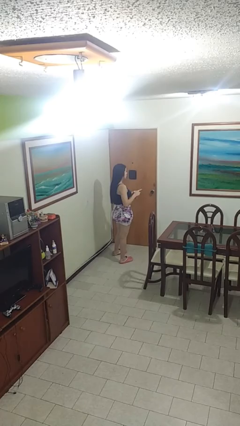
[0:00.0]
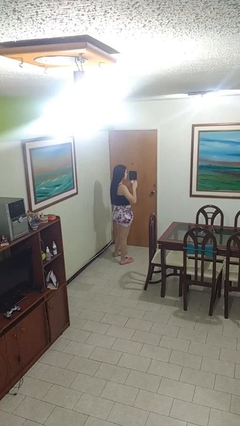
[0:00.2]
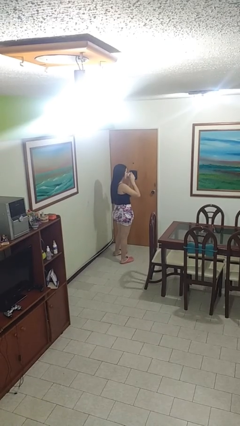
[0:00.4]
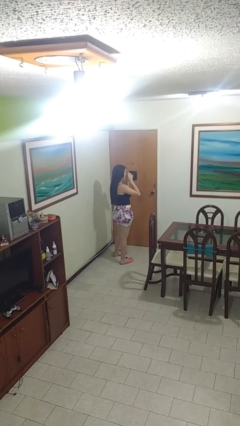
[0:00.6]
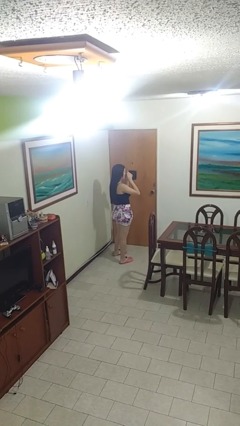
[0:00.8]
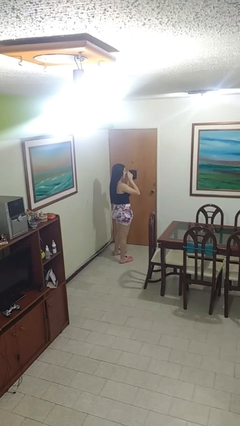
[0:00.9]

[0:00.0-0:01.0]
person drinks from mug

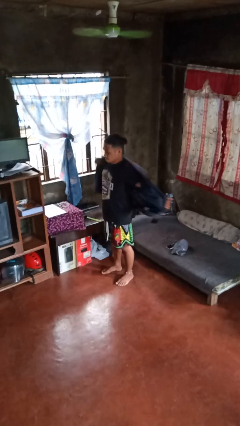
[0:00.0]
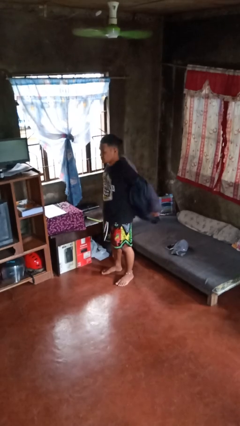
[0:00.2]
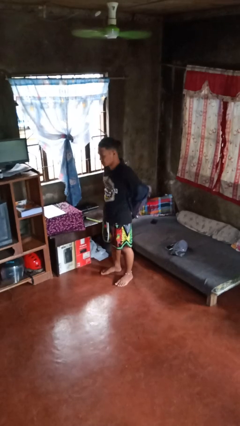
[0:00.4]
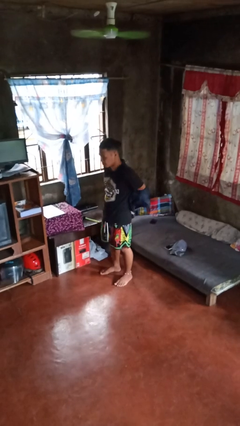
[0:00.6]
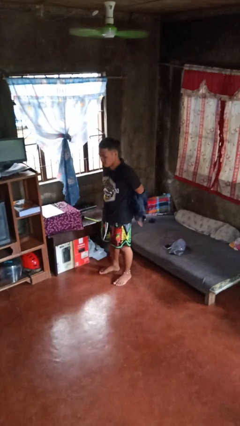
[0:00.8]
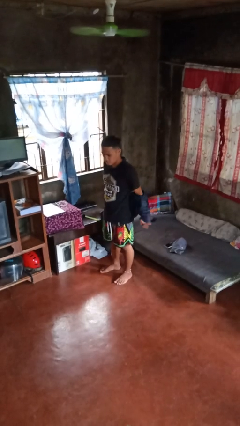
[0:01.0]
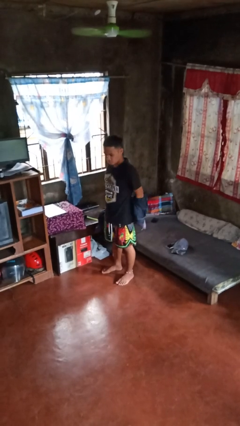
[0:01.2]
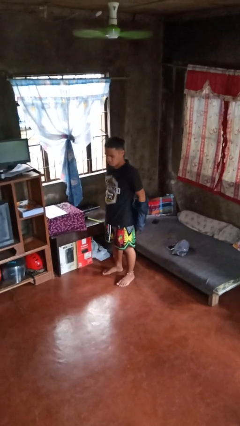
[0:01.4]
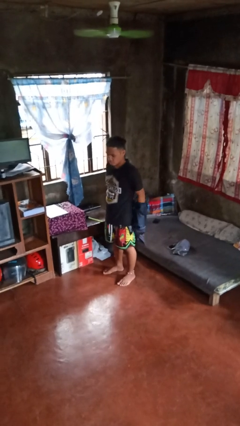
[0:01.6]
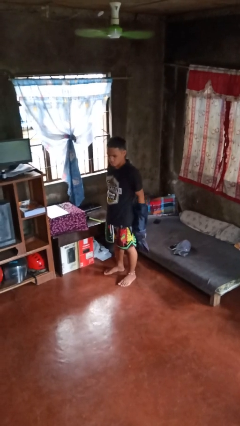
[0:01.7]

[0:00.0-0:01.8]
person takes off jacket

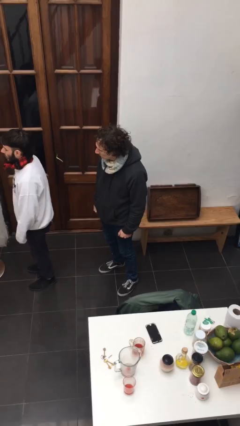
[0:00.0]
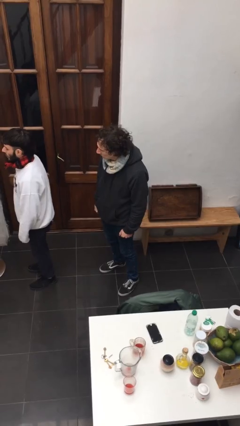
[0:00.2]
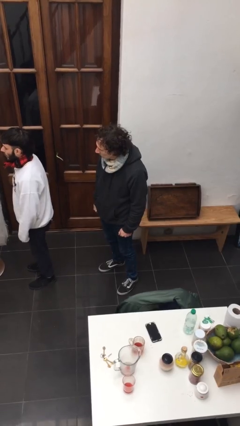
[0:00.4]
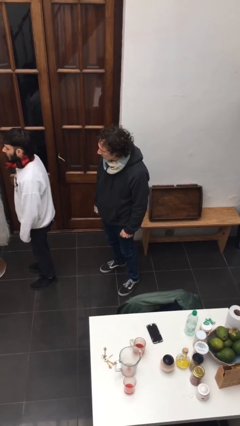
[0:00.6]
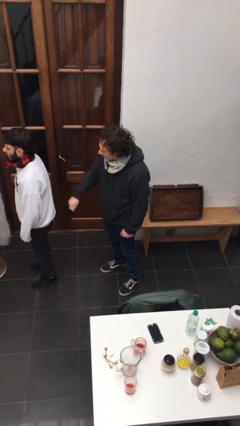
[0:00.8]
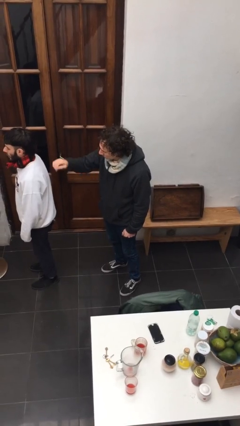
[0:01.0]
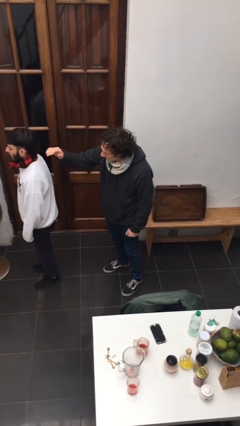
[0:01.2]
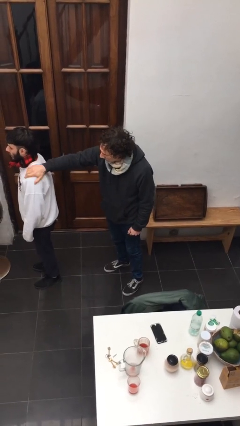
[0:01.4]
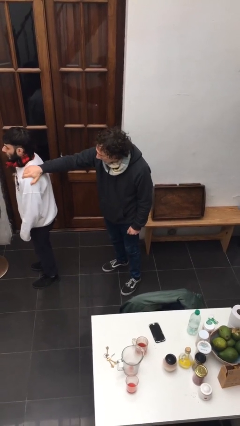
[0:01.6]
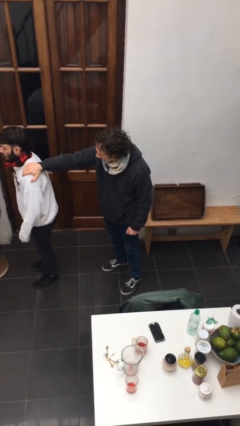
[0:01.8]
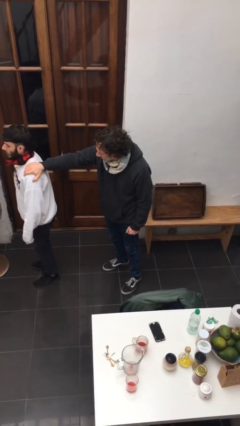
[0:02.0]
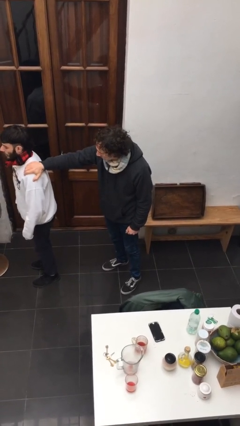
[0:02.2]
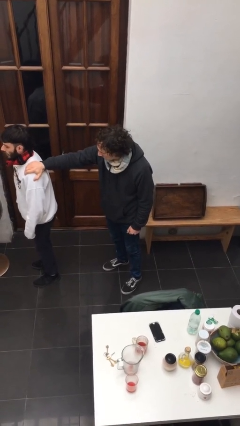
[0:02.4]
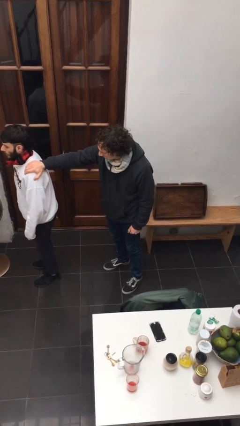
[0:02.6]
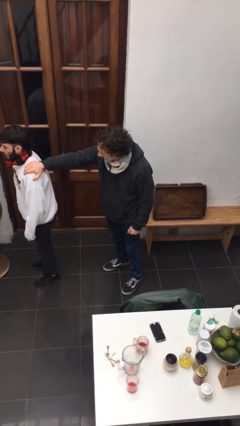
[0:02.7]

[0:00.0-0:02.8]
person grabs person by shoulder

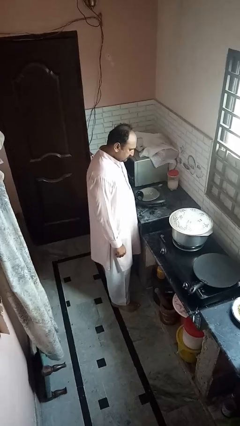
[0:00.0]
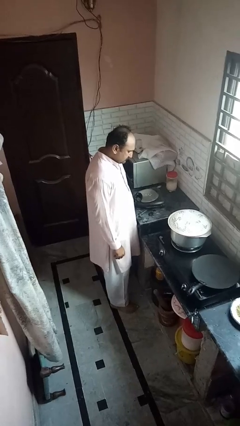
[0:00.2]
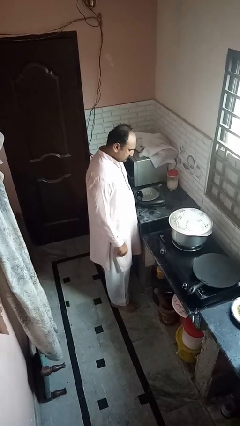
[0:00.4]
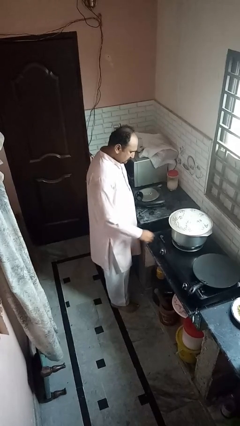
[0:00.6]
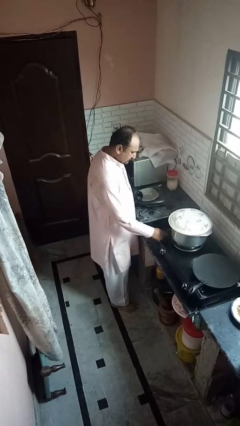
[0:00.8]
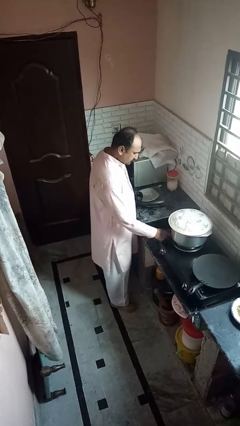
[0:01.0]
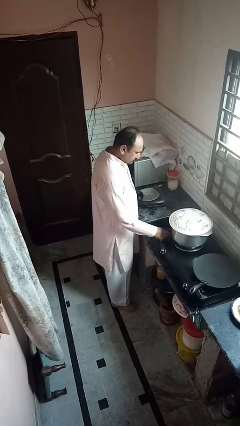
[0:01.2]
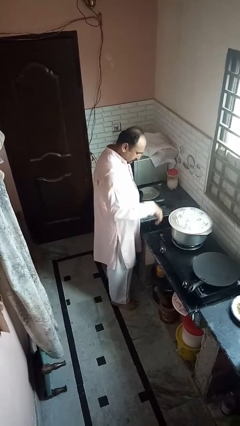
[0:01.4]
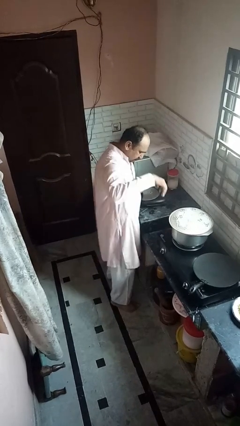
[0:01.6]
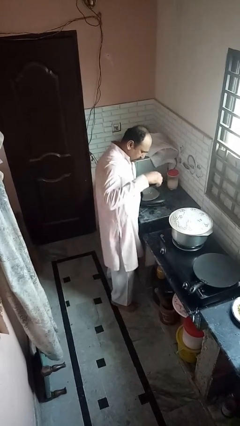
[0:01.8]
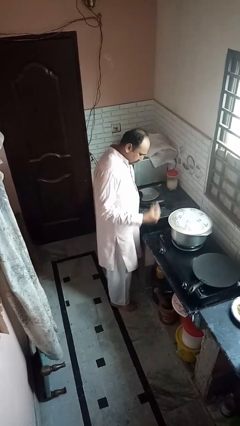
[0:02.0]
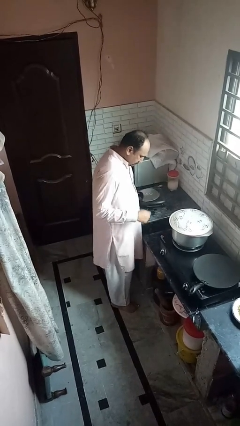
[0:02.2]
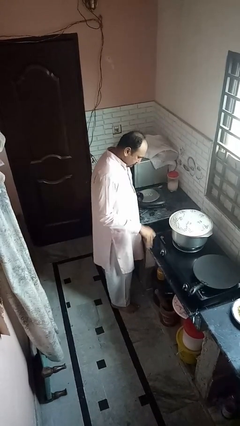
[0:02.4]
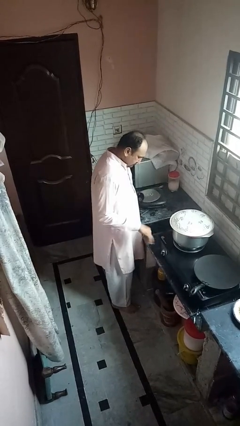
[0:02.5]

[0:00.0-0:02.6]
person burns hand

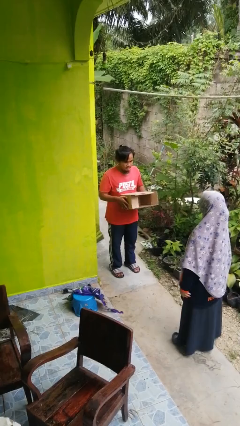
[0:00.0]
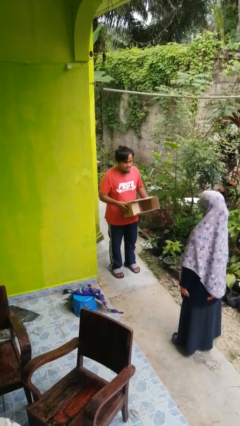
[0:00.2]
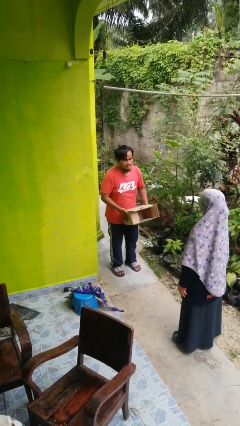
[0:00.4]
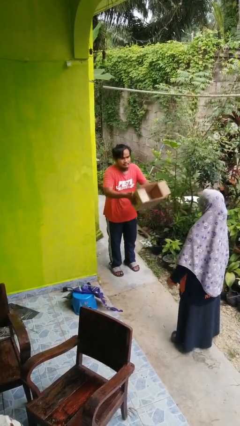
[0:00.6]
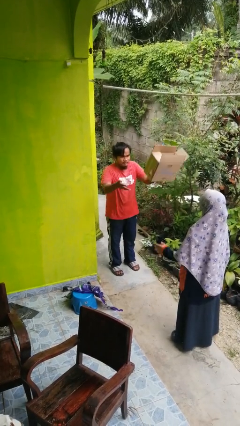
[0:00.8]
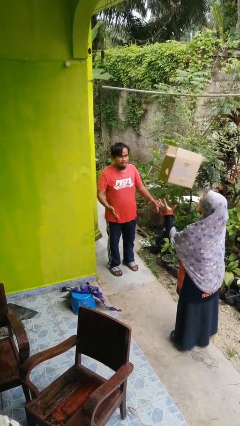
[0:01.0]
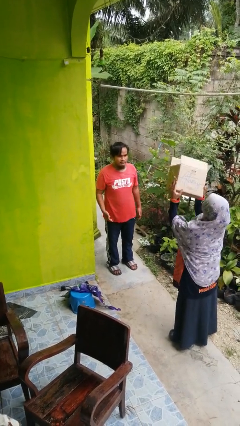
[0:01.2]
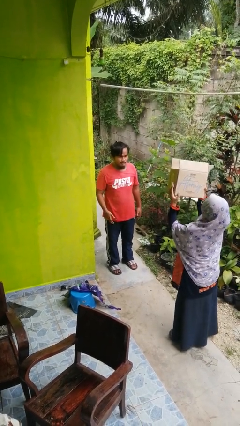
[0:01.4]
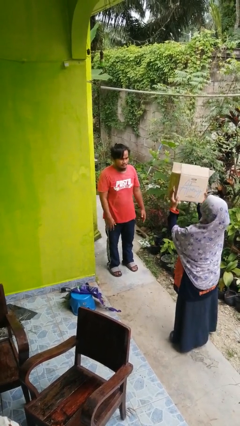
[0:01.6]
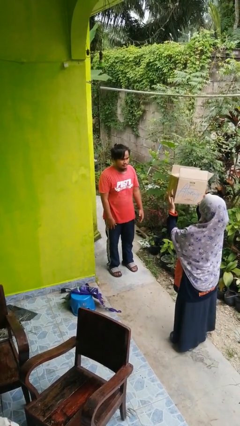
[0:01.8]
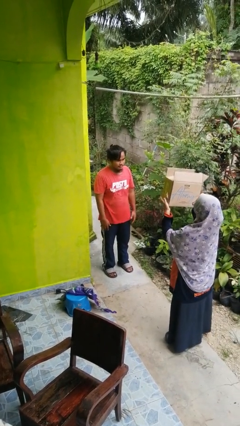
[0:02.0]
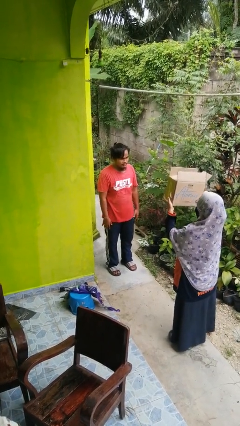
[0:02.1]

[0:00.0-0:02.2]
person throws object to person

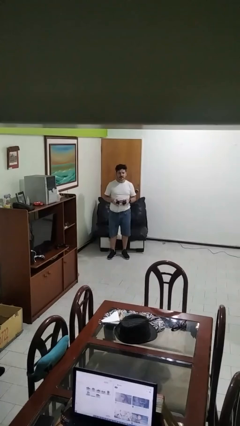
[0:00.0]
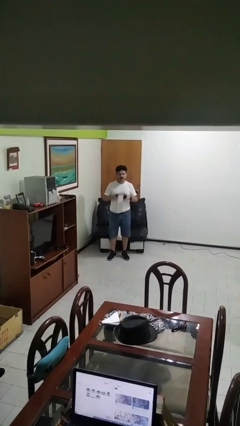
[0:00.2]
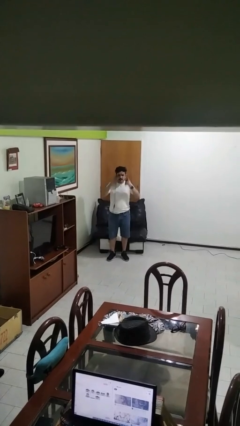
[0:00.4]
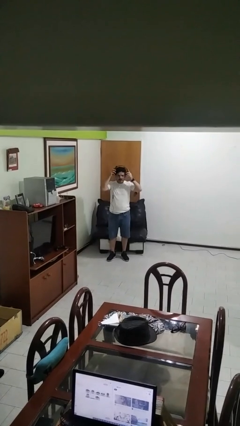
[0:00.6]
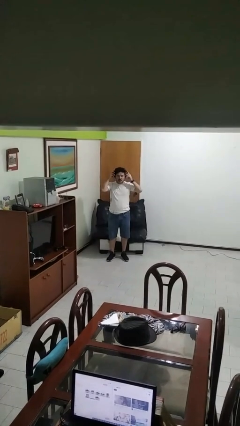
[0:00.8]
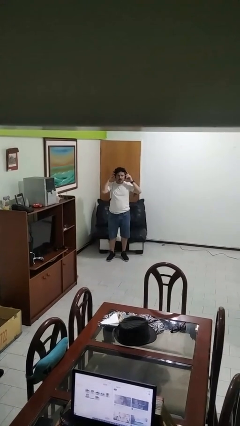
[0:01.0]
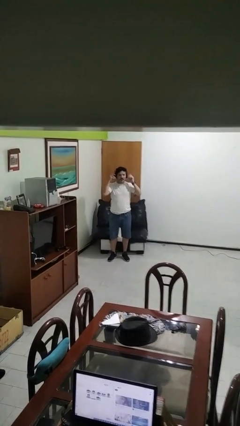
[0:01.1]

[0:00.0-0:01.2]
person puts on headphones

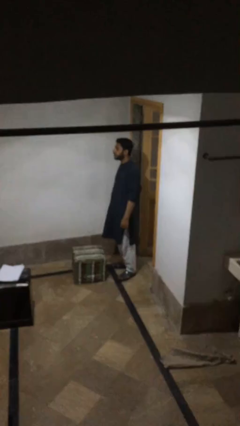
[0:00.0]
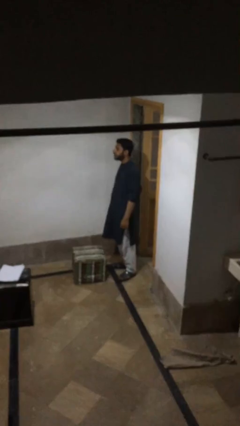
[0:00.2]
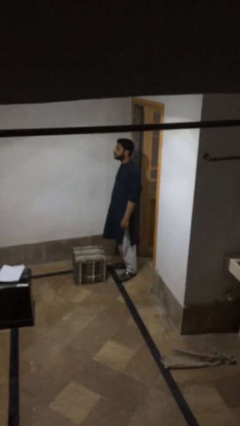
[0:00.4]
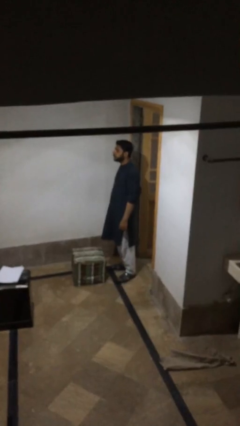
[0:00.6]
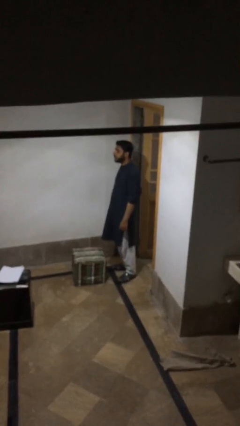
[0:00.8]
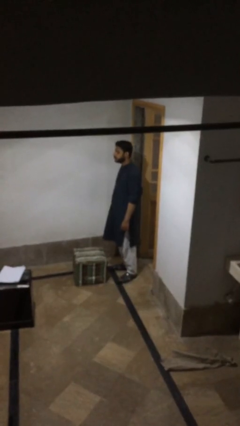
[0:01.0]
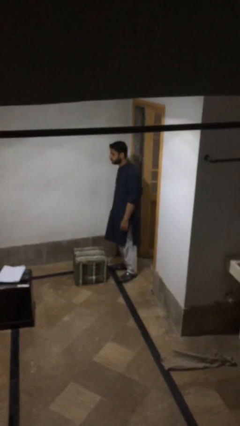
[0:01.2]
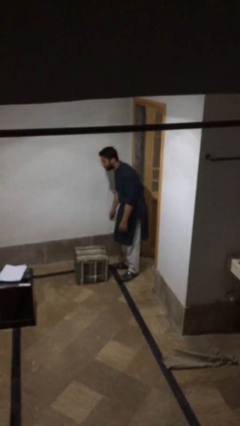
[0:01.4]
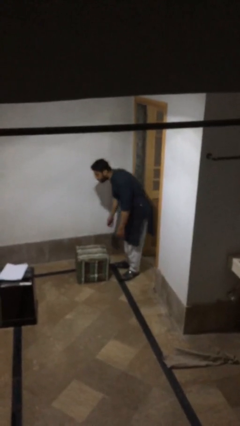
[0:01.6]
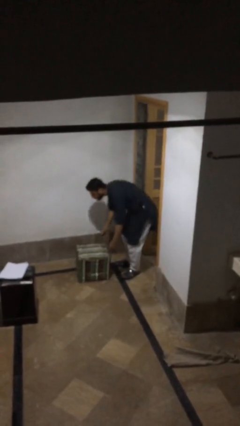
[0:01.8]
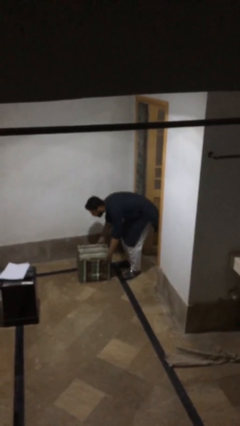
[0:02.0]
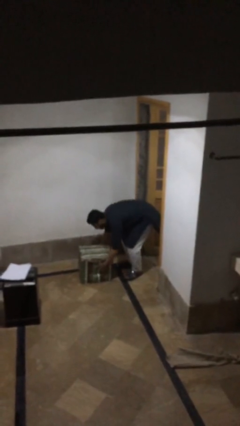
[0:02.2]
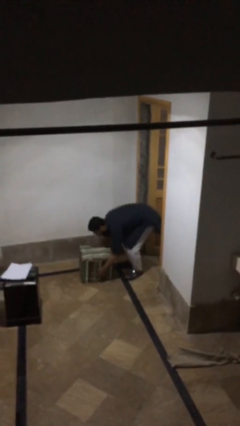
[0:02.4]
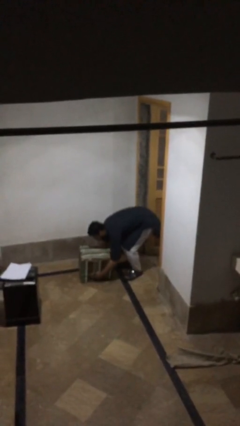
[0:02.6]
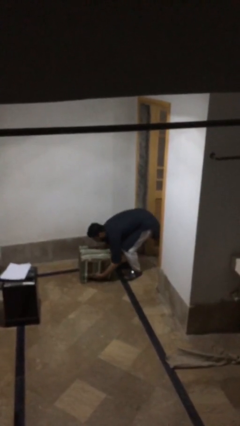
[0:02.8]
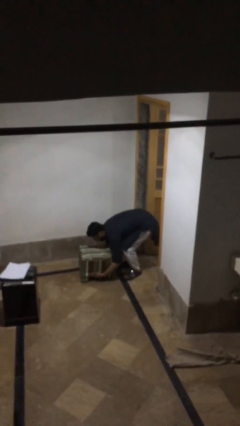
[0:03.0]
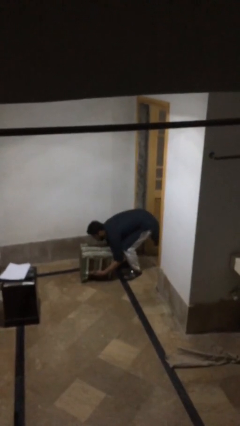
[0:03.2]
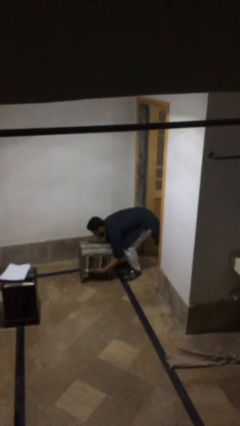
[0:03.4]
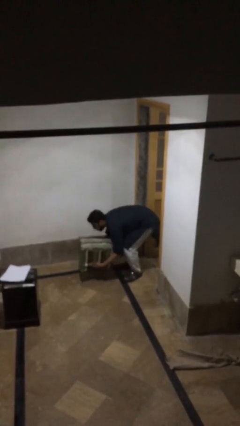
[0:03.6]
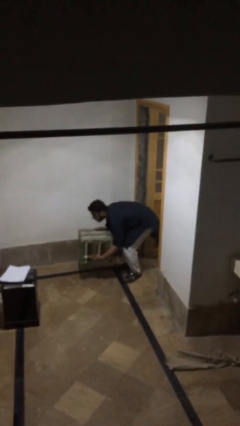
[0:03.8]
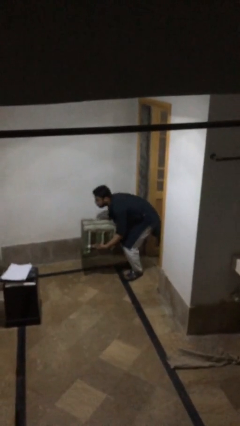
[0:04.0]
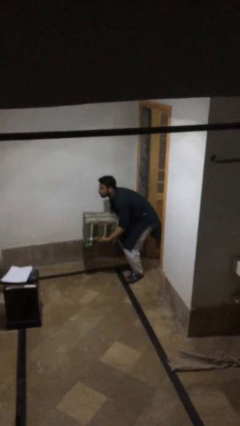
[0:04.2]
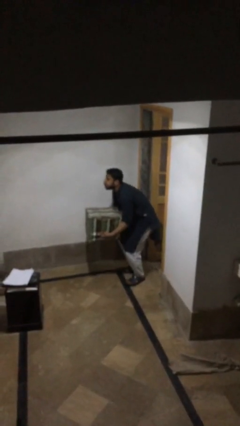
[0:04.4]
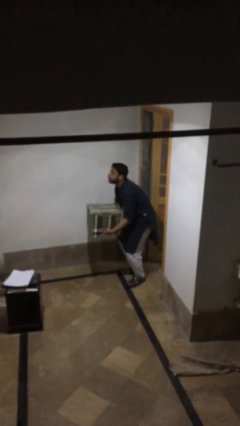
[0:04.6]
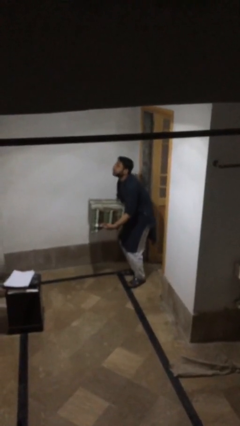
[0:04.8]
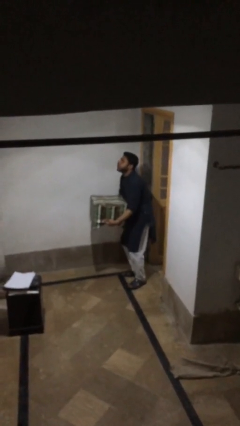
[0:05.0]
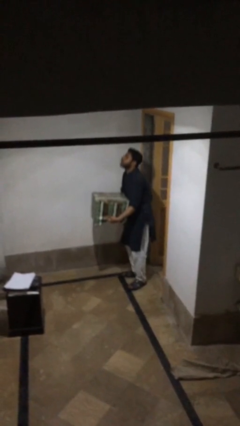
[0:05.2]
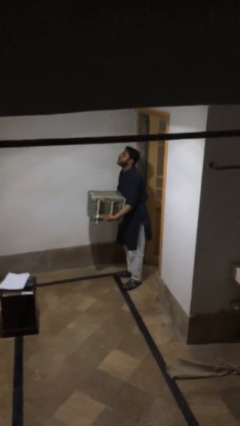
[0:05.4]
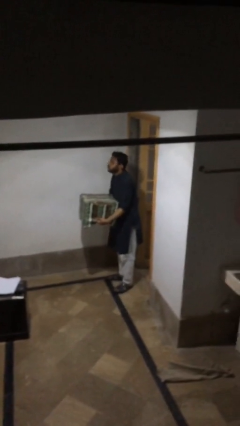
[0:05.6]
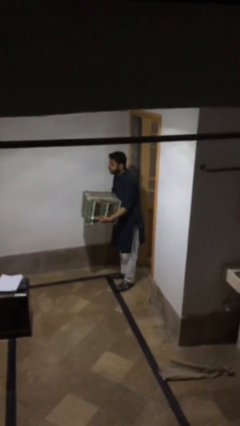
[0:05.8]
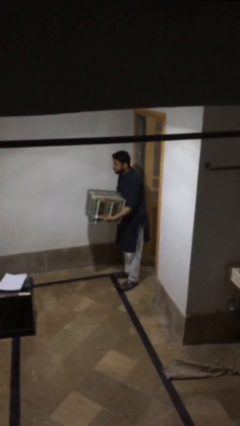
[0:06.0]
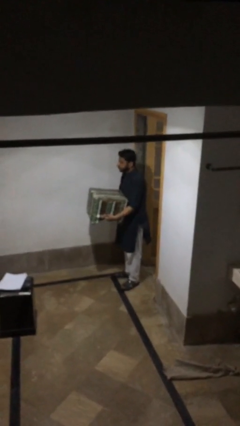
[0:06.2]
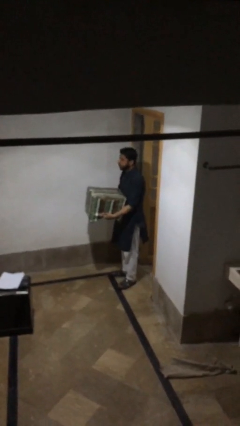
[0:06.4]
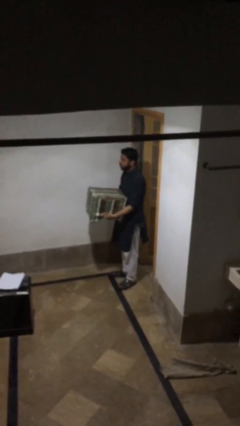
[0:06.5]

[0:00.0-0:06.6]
person picks up object from floor
